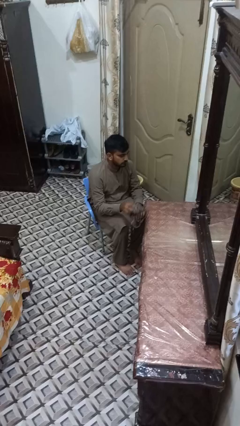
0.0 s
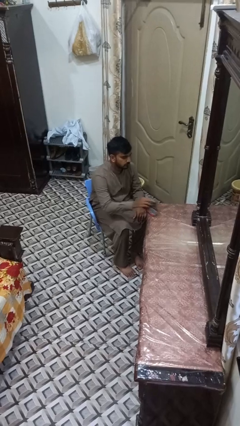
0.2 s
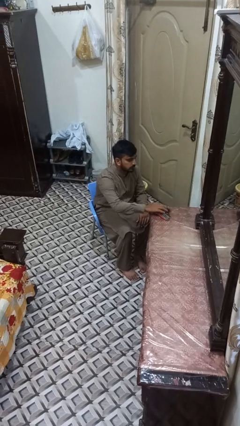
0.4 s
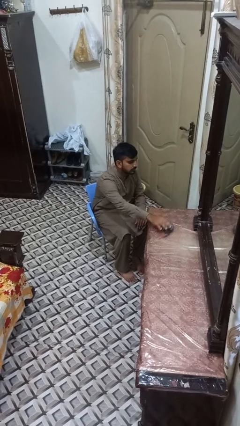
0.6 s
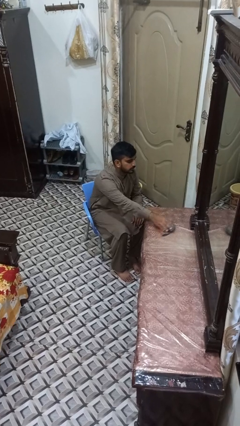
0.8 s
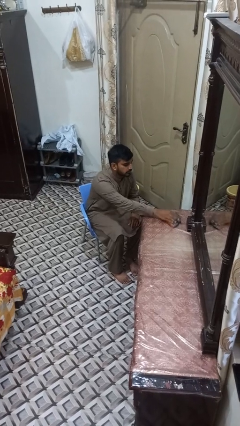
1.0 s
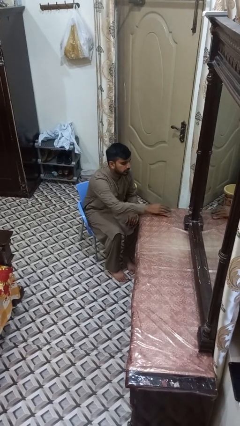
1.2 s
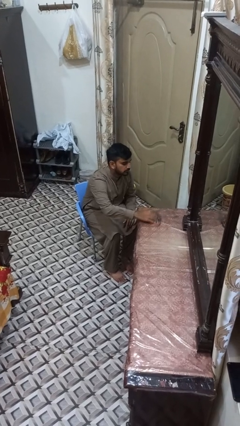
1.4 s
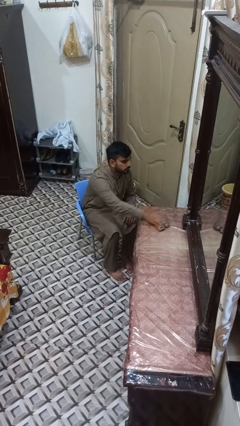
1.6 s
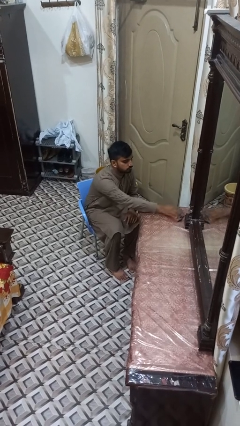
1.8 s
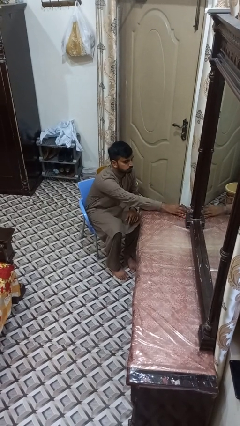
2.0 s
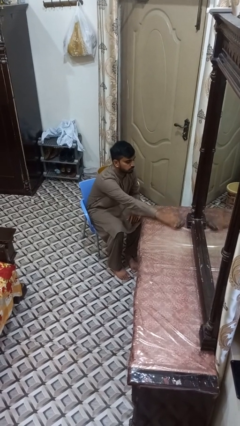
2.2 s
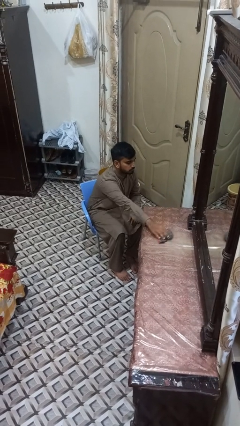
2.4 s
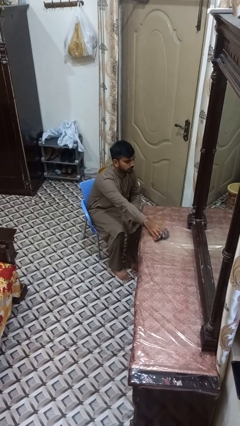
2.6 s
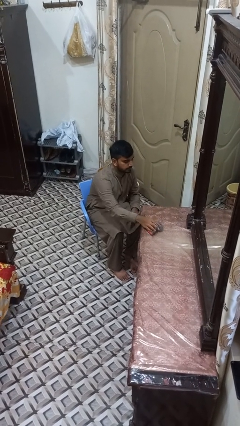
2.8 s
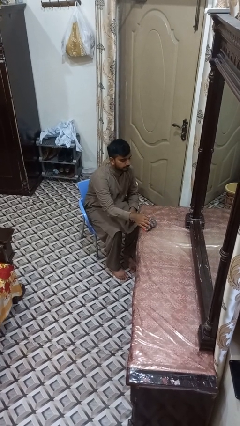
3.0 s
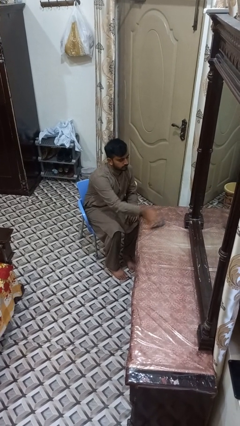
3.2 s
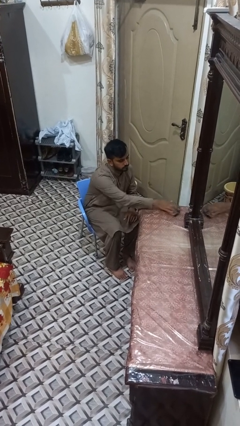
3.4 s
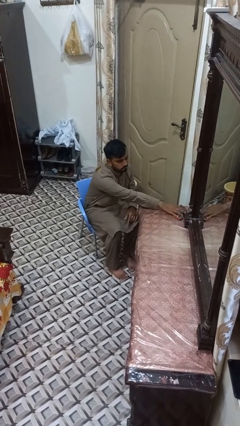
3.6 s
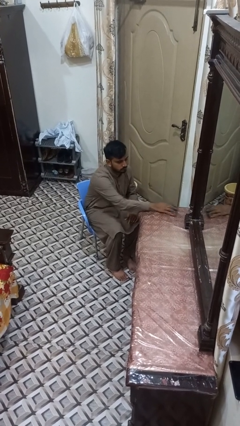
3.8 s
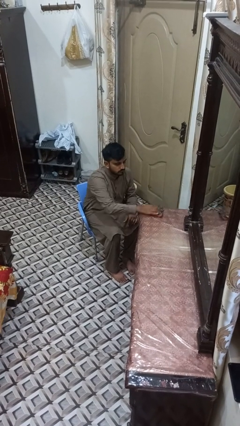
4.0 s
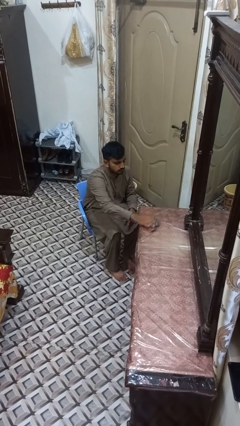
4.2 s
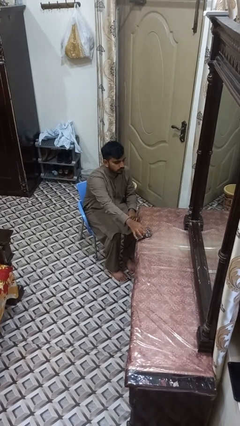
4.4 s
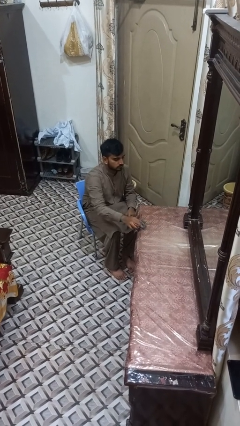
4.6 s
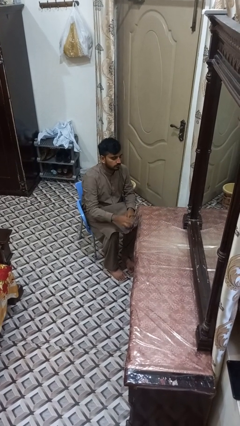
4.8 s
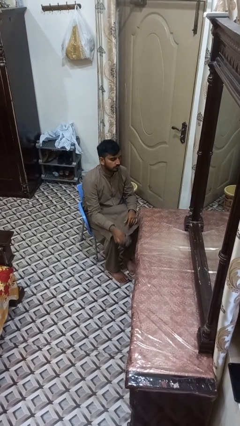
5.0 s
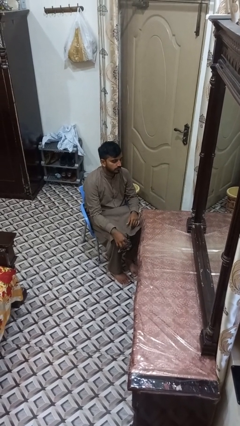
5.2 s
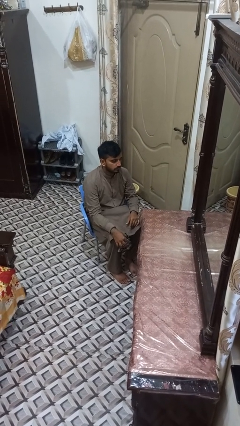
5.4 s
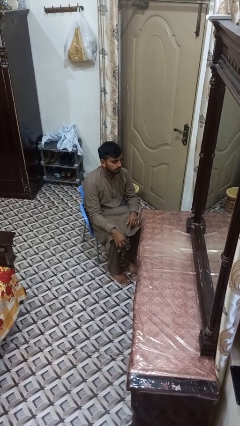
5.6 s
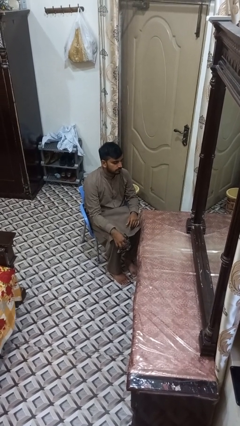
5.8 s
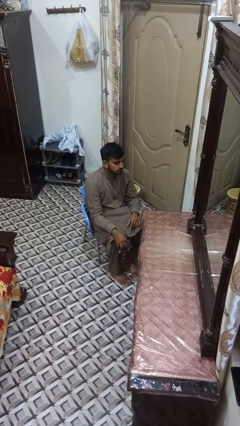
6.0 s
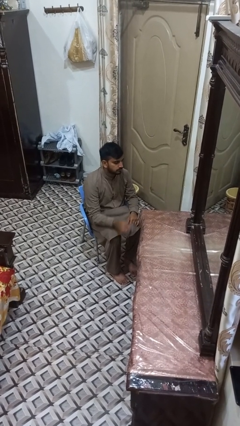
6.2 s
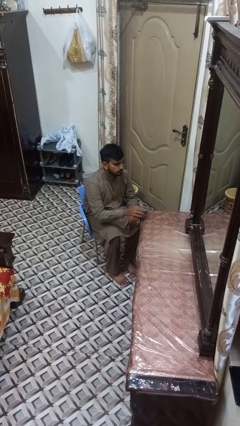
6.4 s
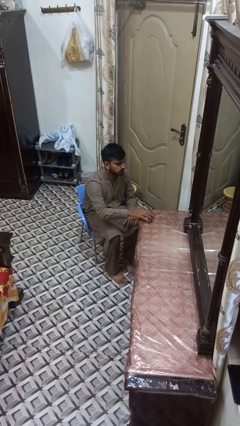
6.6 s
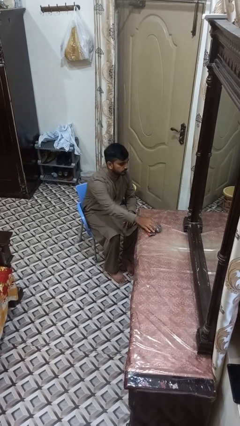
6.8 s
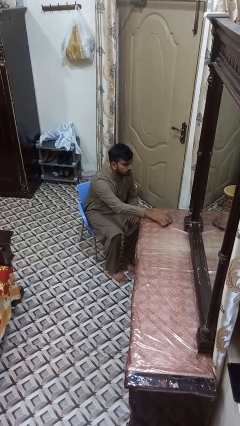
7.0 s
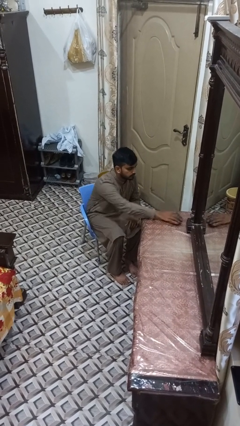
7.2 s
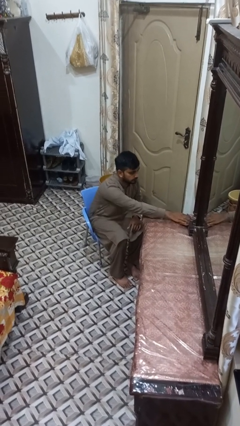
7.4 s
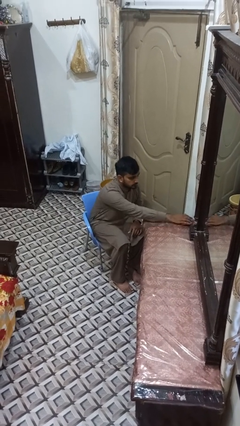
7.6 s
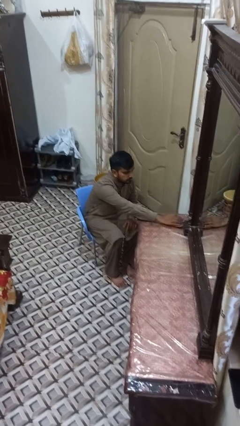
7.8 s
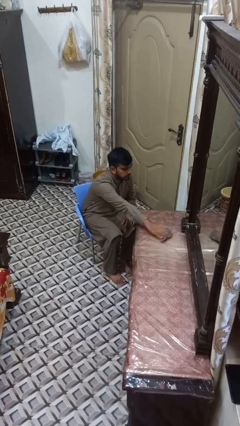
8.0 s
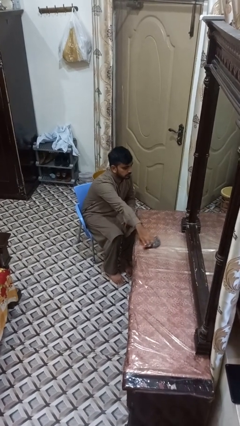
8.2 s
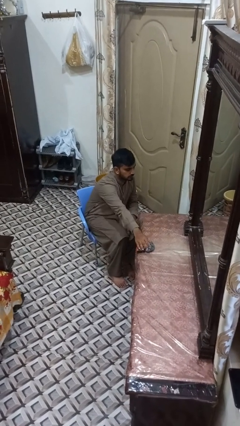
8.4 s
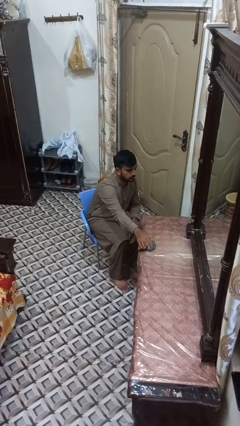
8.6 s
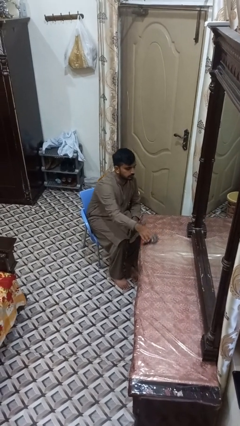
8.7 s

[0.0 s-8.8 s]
person cleans table with rag

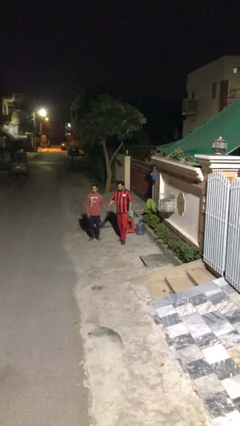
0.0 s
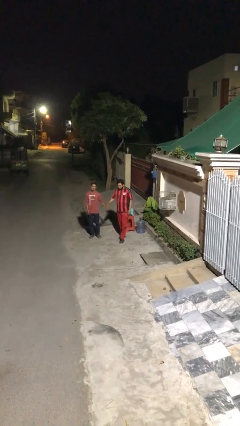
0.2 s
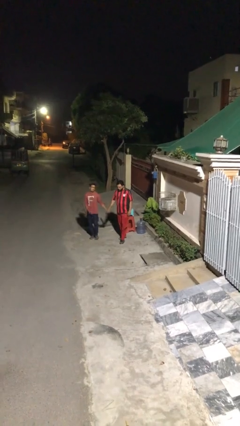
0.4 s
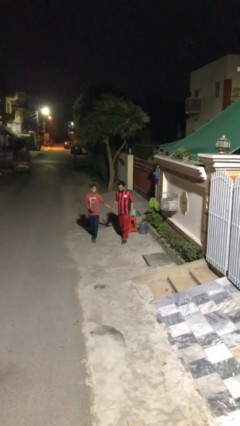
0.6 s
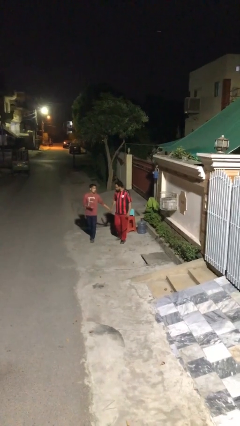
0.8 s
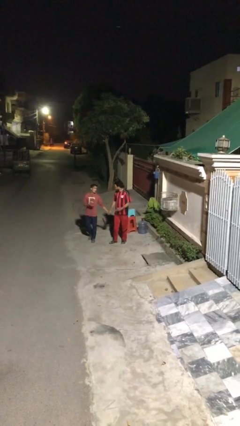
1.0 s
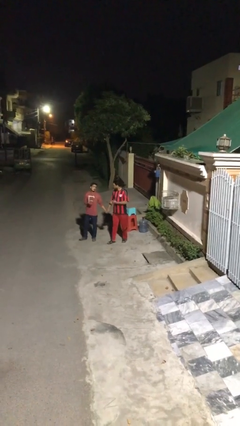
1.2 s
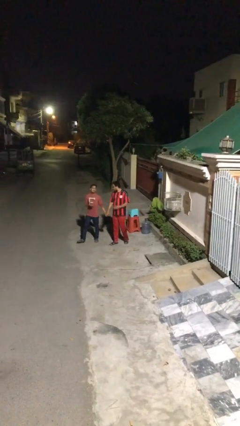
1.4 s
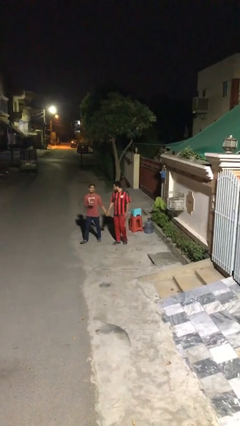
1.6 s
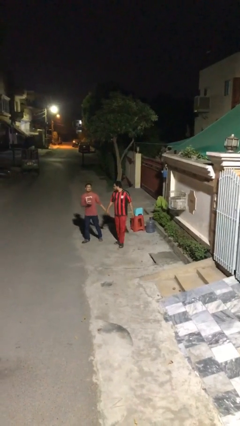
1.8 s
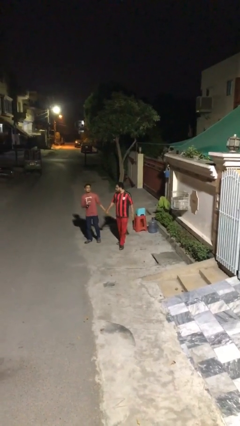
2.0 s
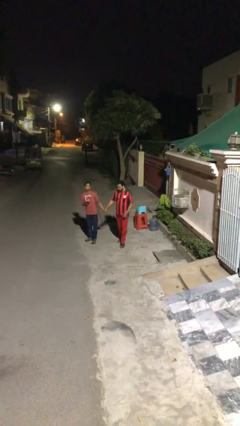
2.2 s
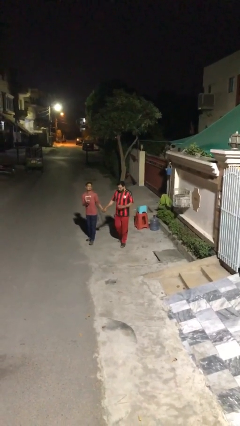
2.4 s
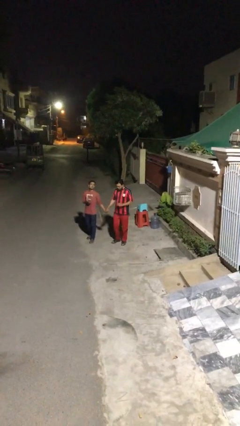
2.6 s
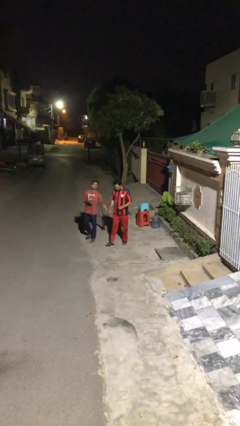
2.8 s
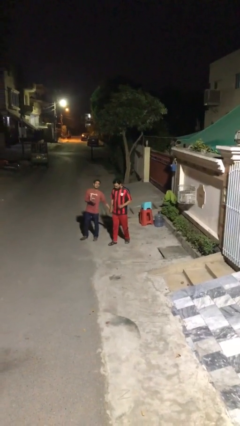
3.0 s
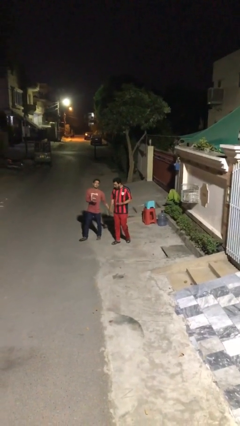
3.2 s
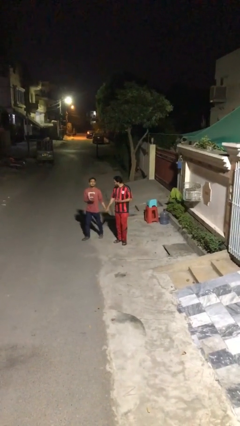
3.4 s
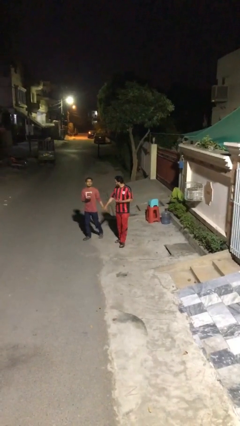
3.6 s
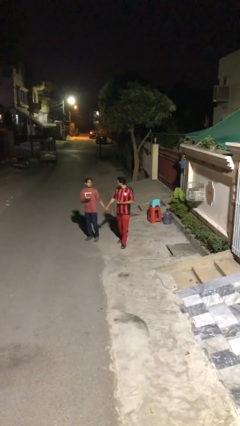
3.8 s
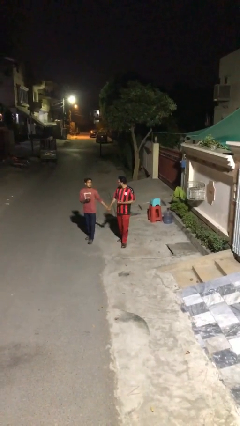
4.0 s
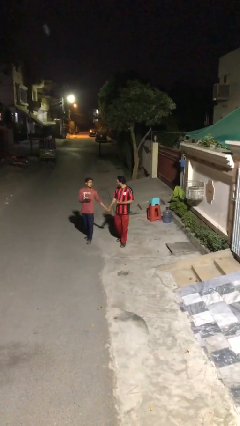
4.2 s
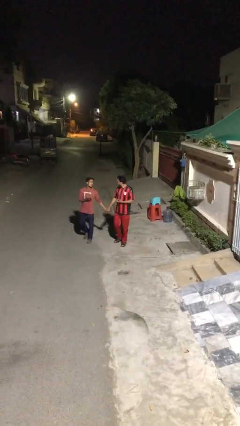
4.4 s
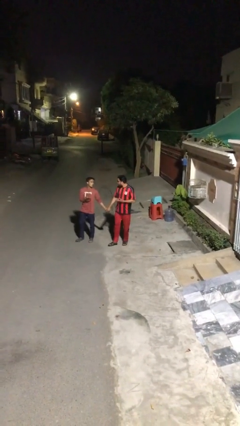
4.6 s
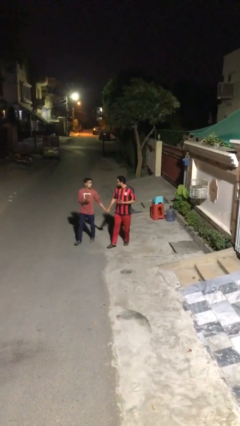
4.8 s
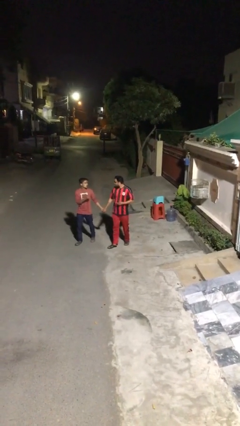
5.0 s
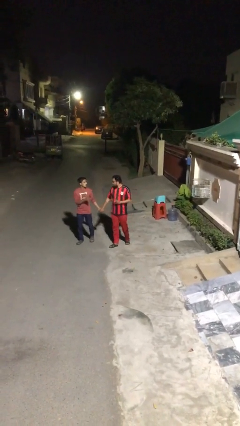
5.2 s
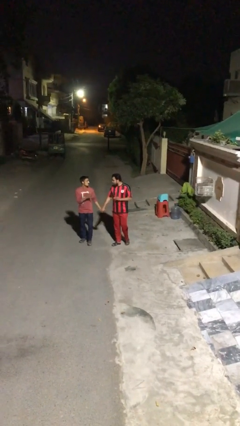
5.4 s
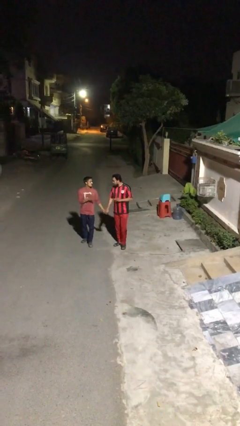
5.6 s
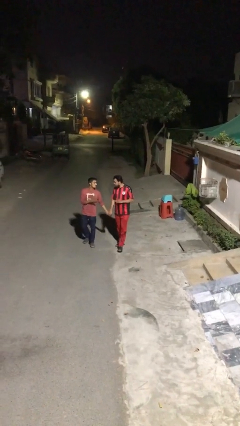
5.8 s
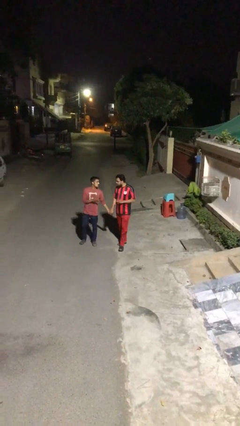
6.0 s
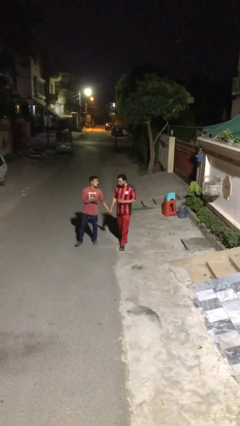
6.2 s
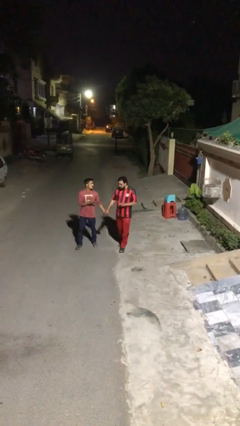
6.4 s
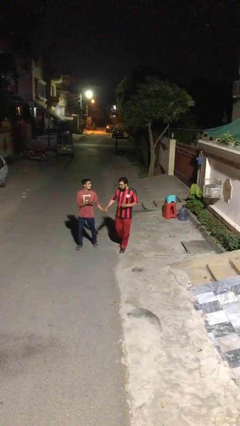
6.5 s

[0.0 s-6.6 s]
person holds hand

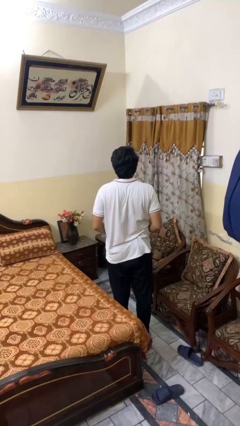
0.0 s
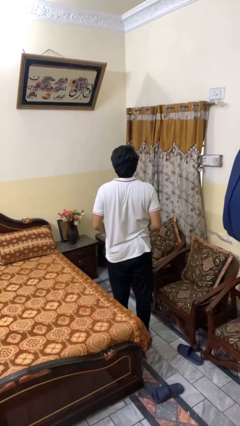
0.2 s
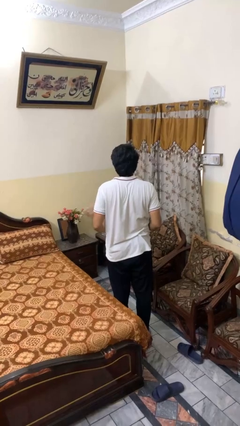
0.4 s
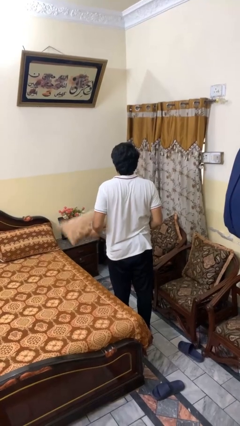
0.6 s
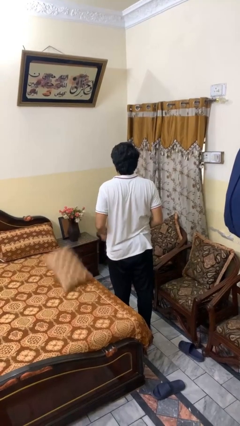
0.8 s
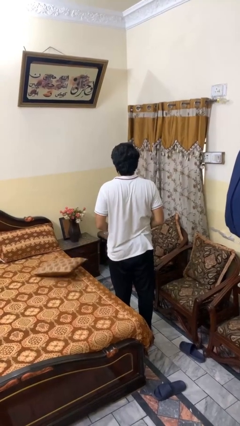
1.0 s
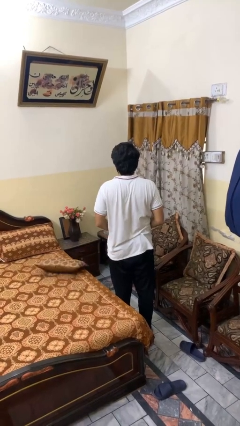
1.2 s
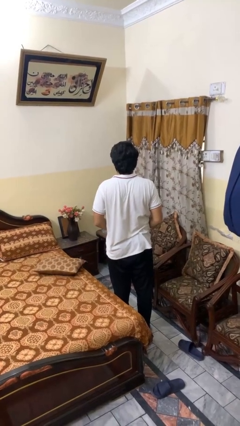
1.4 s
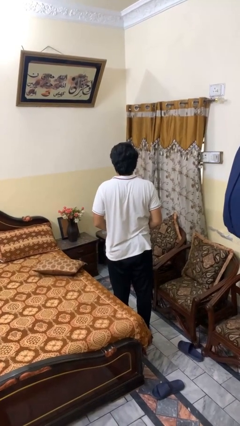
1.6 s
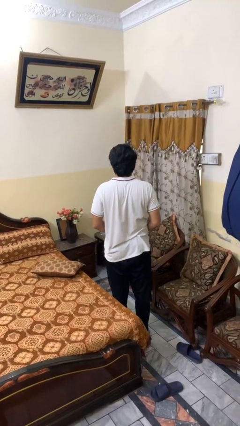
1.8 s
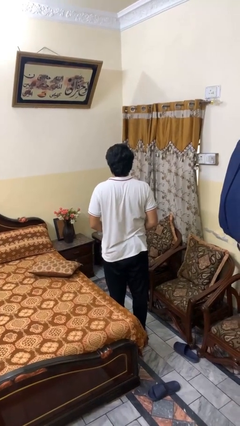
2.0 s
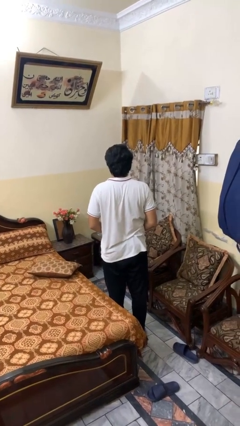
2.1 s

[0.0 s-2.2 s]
person throws object on bed

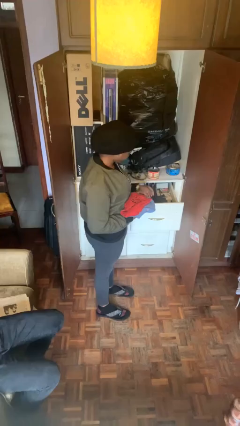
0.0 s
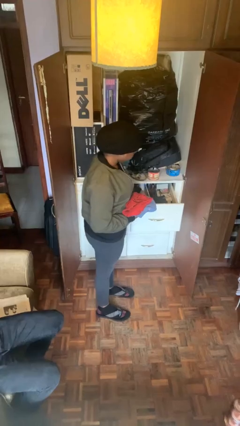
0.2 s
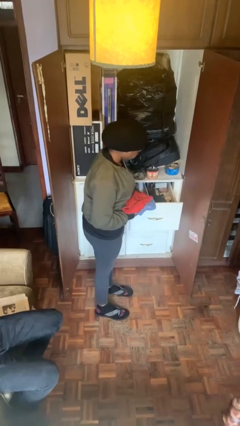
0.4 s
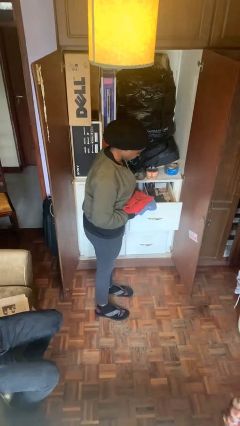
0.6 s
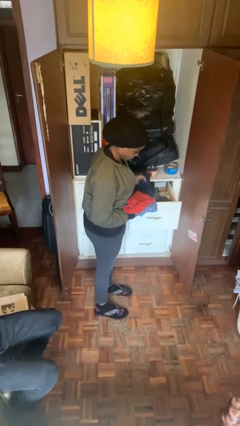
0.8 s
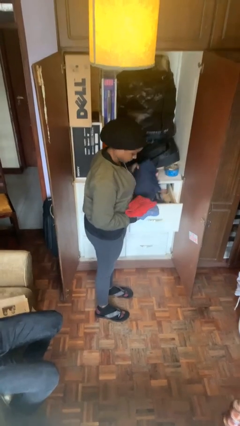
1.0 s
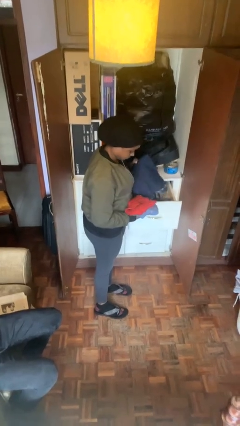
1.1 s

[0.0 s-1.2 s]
person takes clothes from dresser
